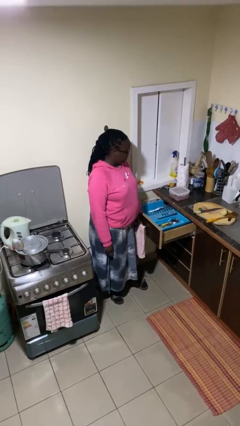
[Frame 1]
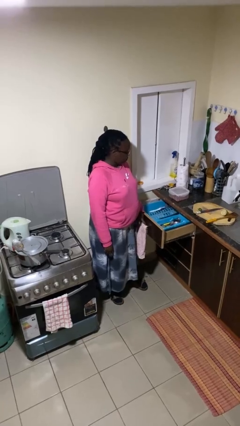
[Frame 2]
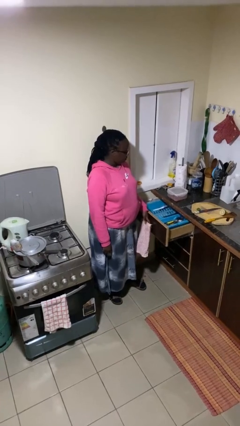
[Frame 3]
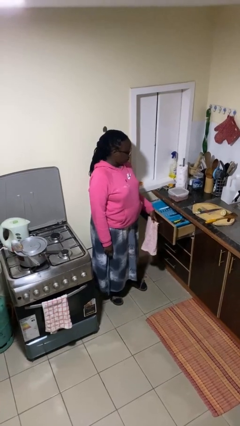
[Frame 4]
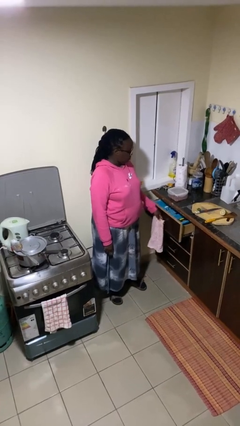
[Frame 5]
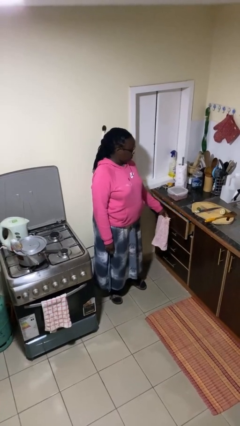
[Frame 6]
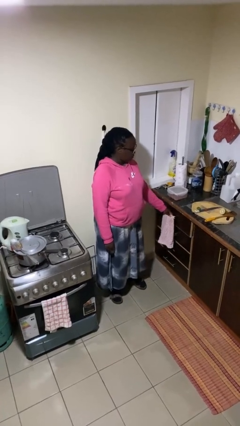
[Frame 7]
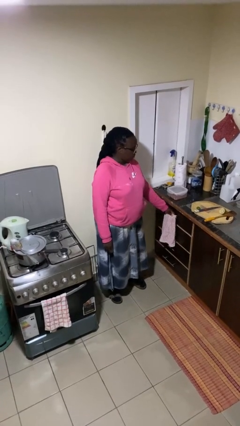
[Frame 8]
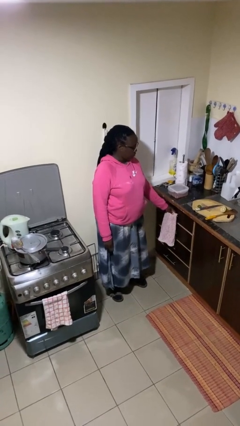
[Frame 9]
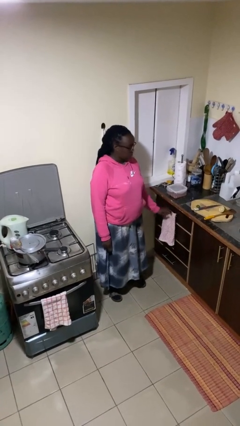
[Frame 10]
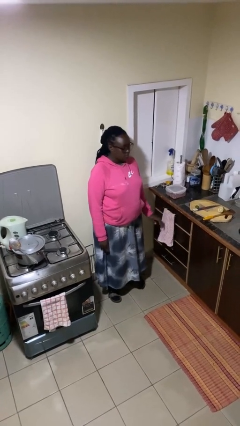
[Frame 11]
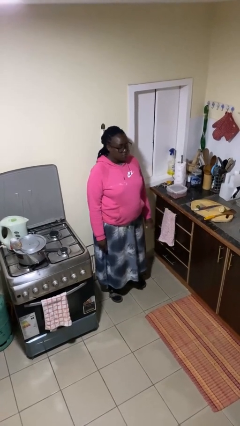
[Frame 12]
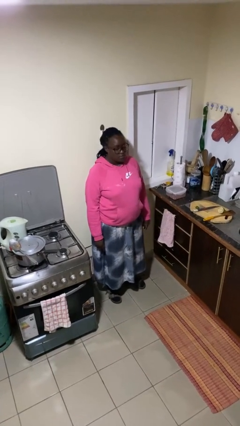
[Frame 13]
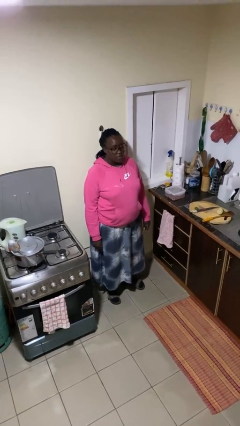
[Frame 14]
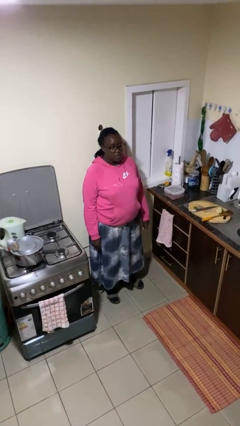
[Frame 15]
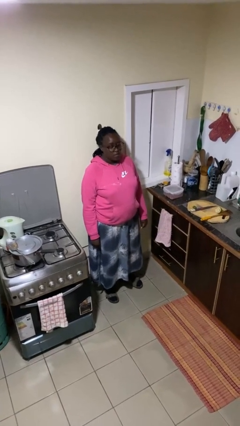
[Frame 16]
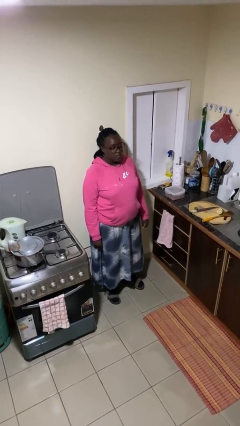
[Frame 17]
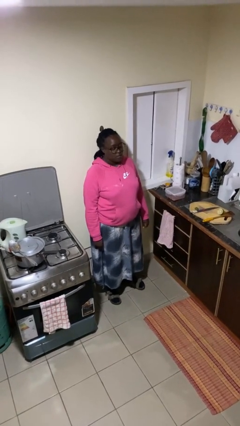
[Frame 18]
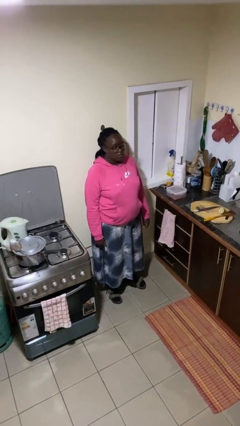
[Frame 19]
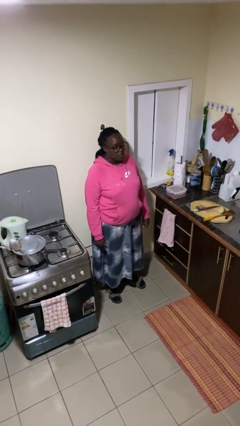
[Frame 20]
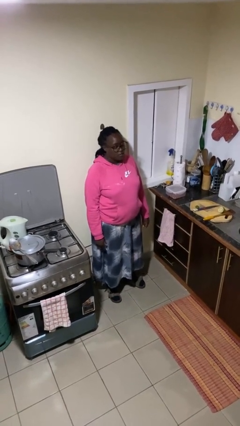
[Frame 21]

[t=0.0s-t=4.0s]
person closes kitchen drawer

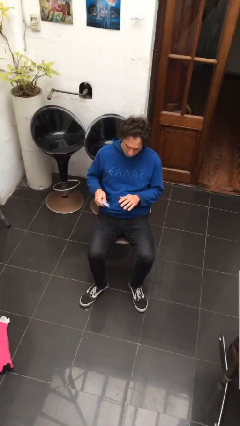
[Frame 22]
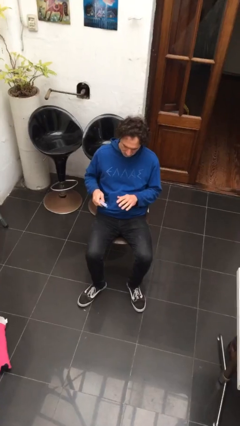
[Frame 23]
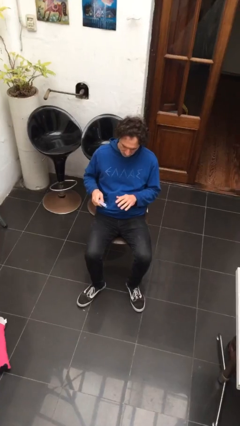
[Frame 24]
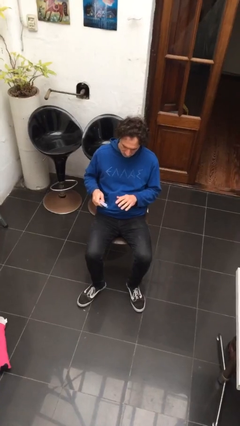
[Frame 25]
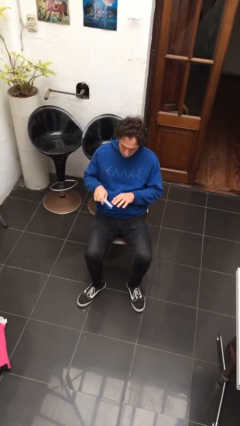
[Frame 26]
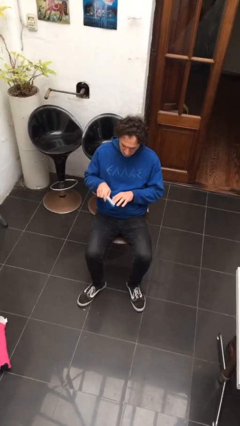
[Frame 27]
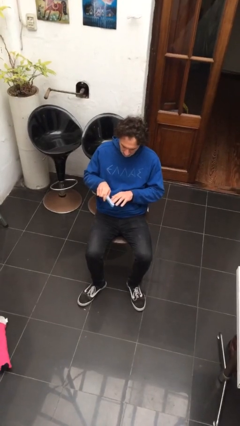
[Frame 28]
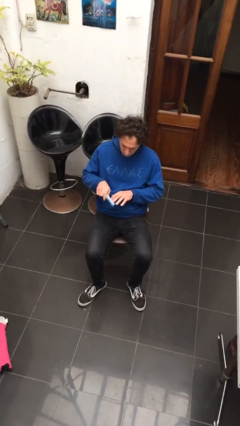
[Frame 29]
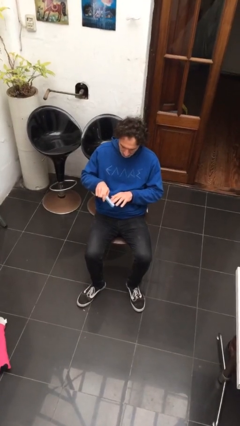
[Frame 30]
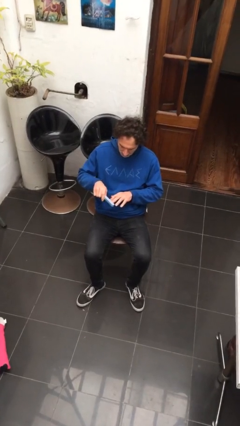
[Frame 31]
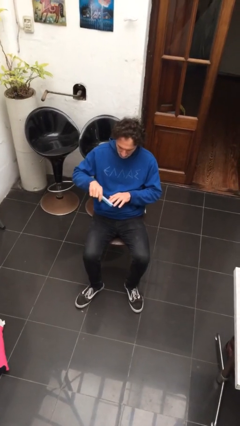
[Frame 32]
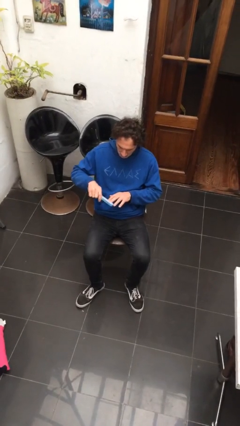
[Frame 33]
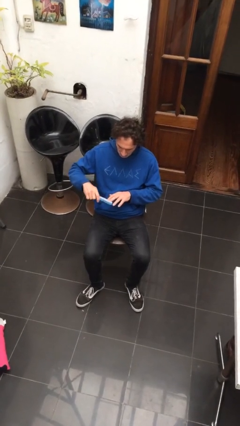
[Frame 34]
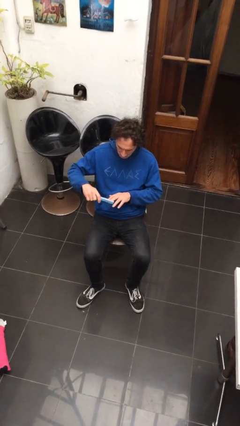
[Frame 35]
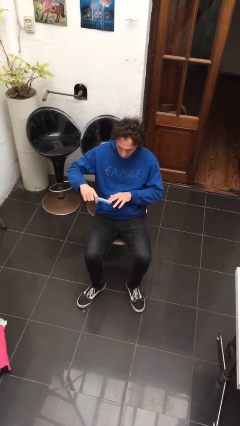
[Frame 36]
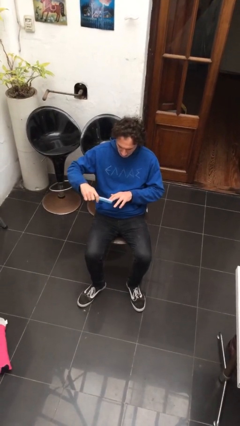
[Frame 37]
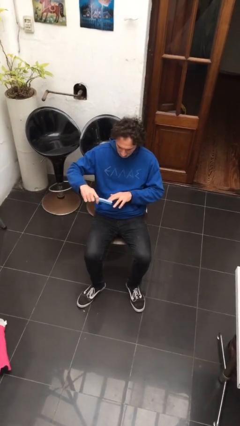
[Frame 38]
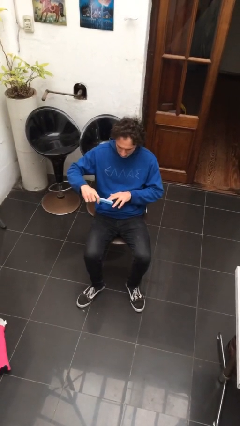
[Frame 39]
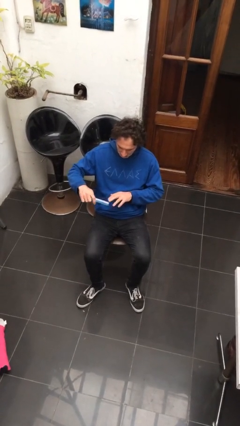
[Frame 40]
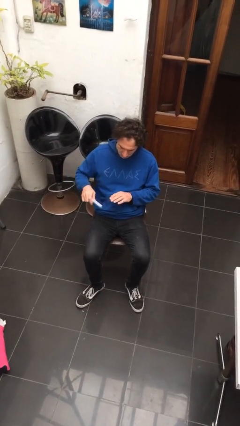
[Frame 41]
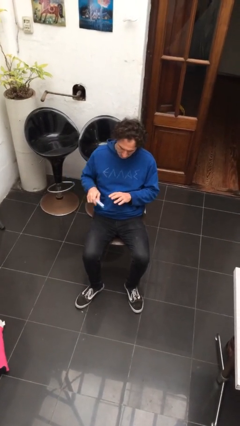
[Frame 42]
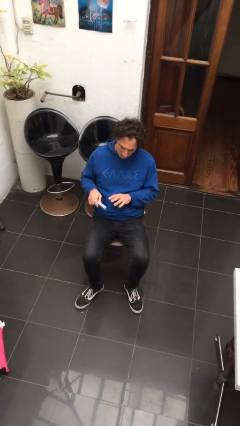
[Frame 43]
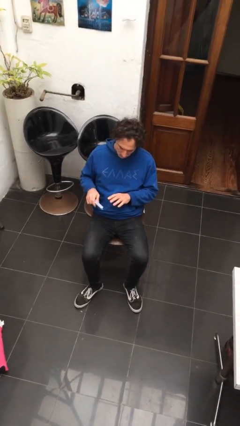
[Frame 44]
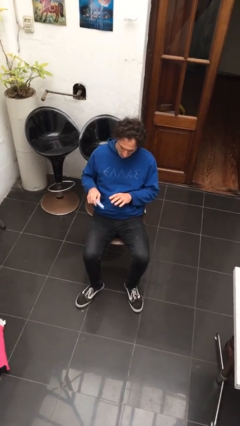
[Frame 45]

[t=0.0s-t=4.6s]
person files fingernails

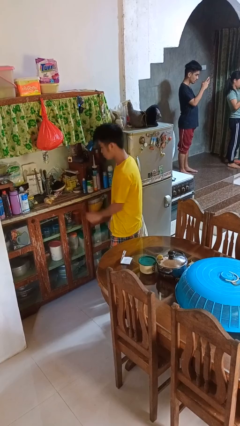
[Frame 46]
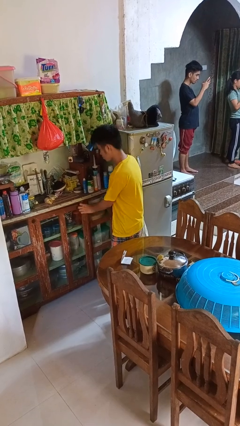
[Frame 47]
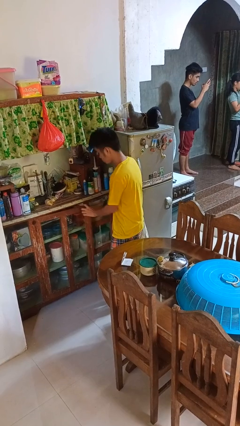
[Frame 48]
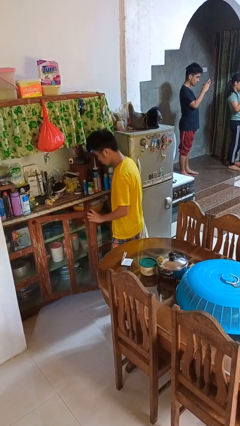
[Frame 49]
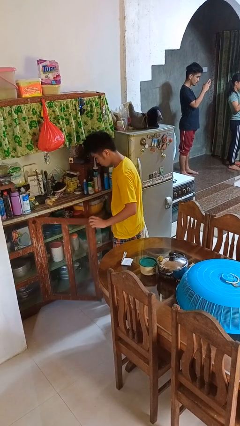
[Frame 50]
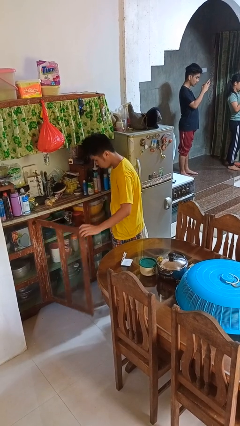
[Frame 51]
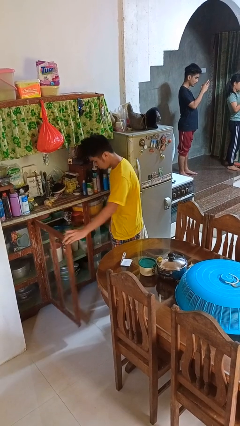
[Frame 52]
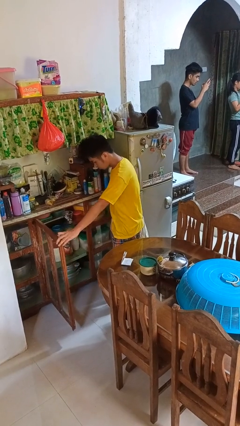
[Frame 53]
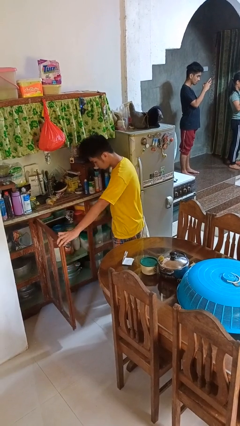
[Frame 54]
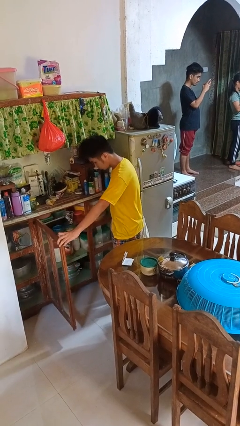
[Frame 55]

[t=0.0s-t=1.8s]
person opens cabinet

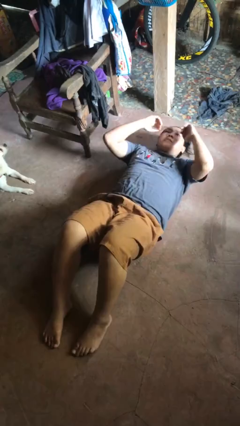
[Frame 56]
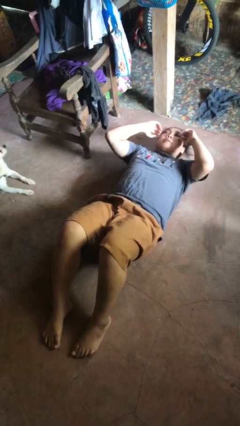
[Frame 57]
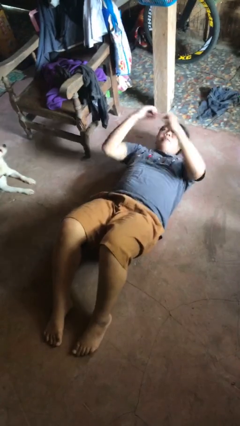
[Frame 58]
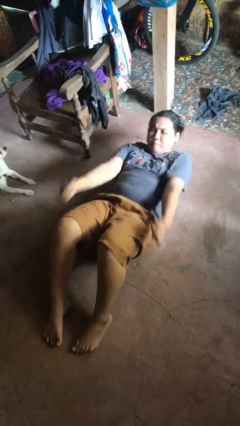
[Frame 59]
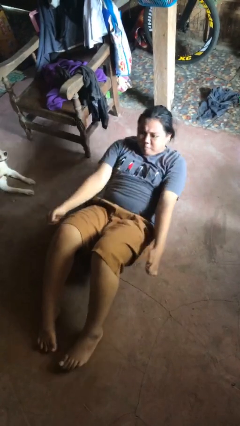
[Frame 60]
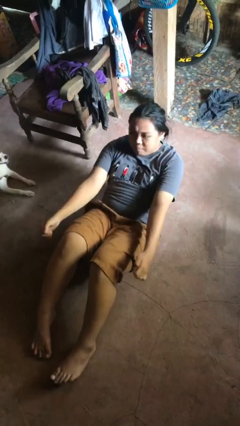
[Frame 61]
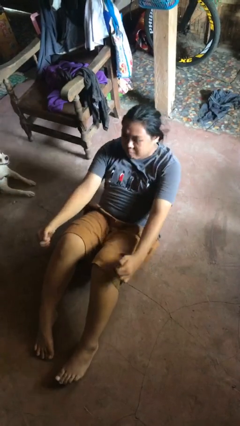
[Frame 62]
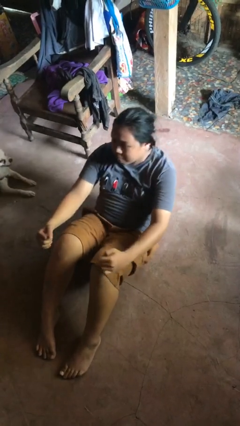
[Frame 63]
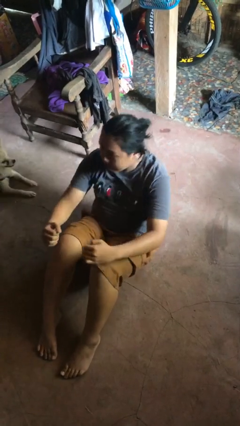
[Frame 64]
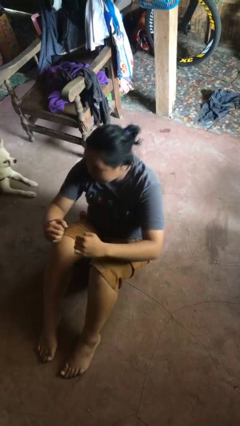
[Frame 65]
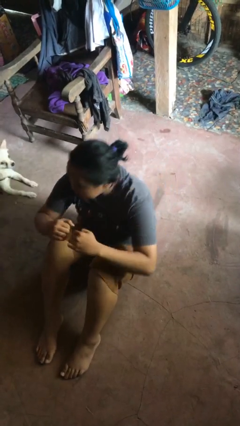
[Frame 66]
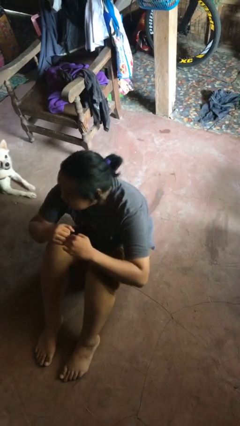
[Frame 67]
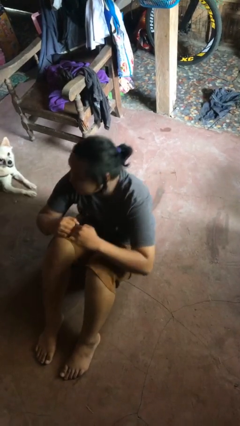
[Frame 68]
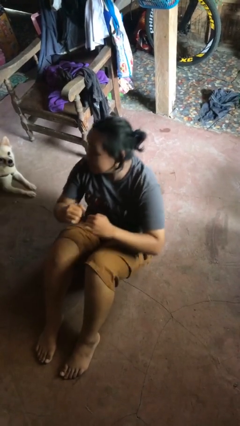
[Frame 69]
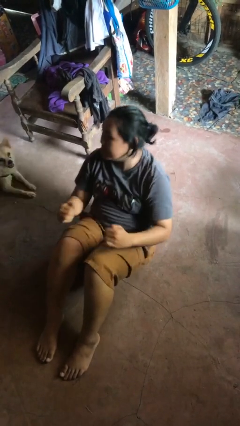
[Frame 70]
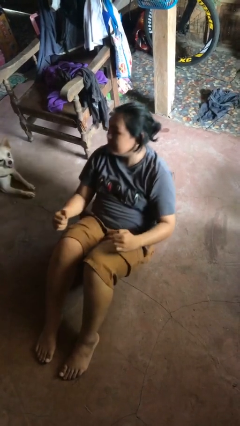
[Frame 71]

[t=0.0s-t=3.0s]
person exercises with situp

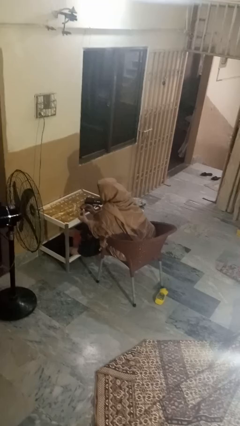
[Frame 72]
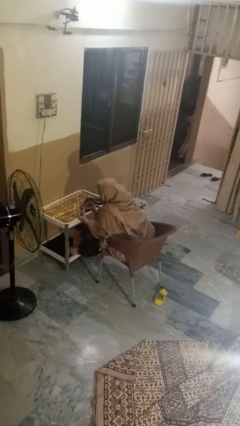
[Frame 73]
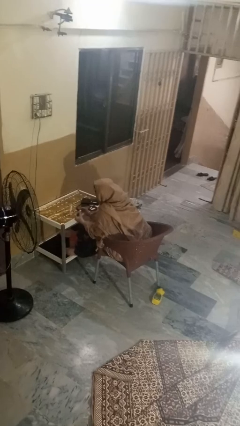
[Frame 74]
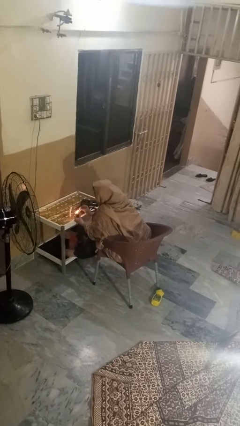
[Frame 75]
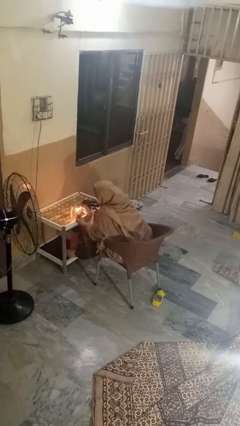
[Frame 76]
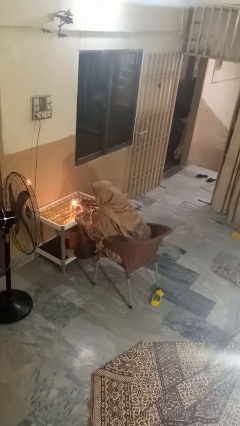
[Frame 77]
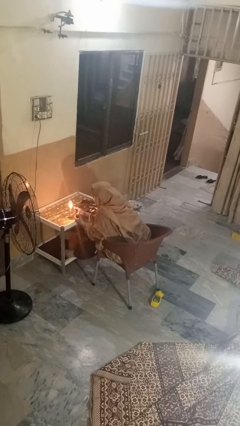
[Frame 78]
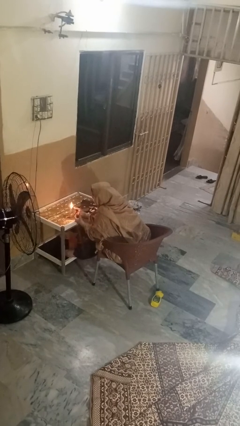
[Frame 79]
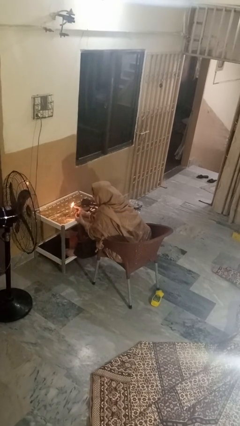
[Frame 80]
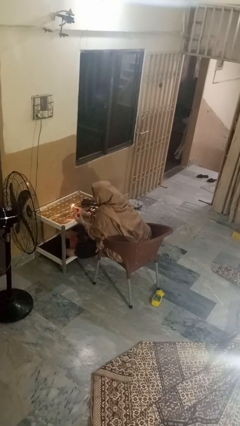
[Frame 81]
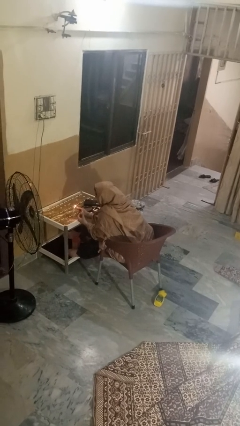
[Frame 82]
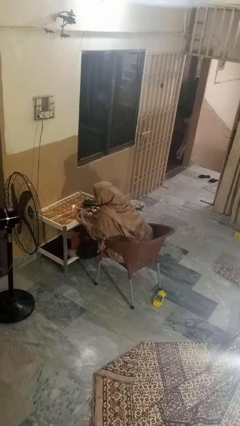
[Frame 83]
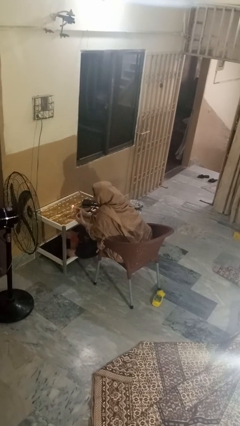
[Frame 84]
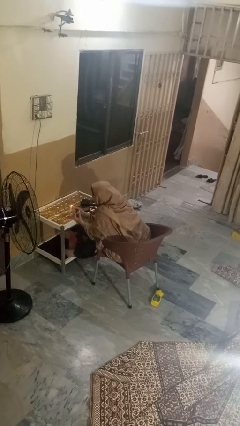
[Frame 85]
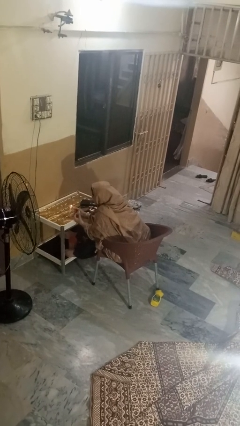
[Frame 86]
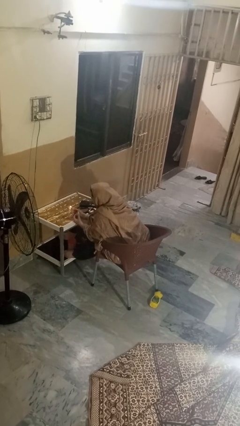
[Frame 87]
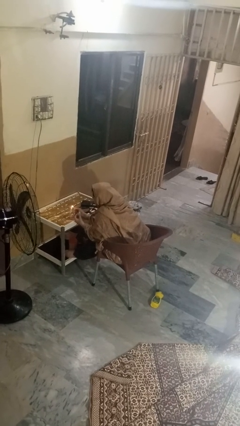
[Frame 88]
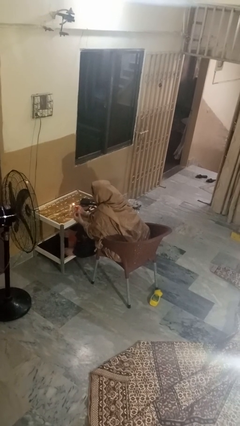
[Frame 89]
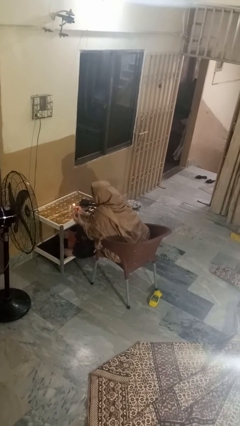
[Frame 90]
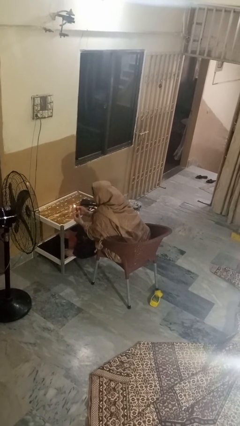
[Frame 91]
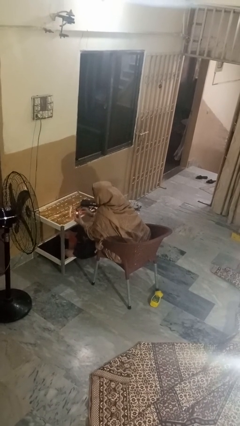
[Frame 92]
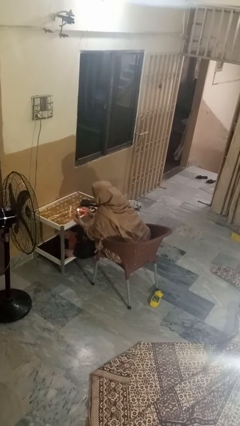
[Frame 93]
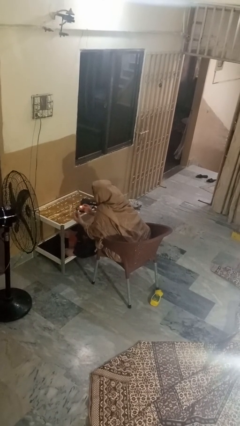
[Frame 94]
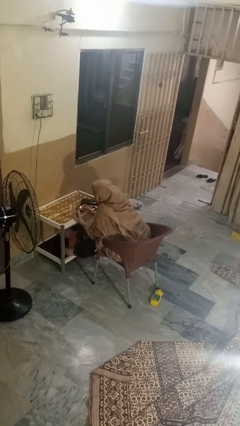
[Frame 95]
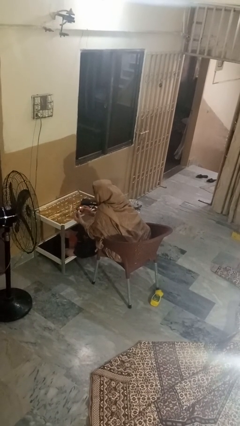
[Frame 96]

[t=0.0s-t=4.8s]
person lights candle
